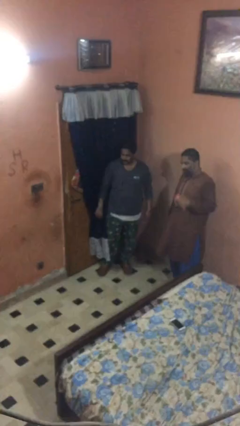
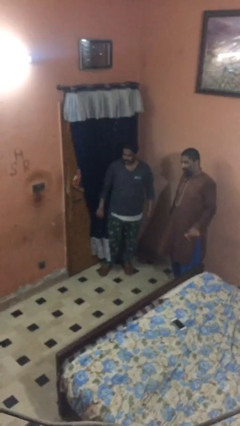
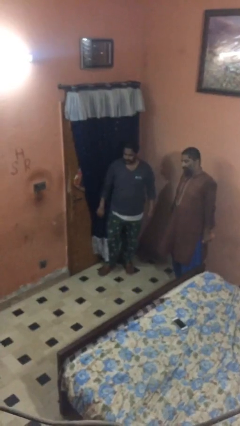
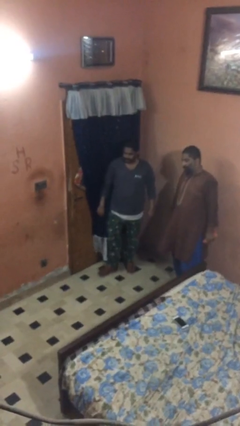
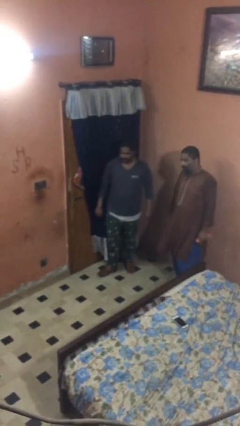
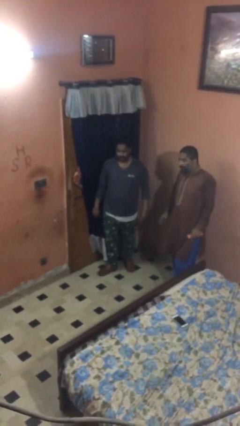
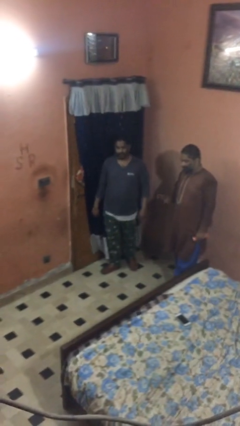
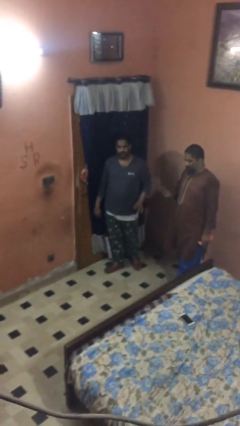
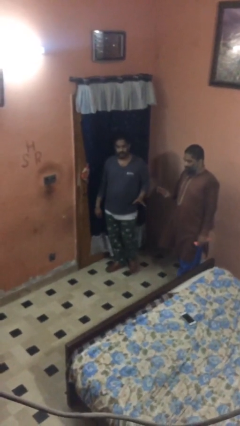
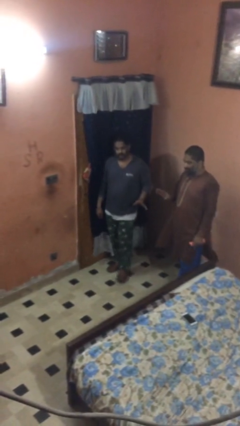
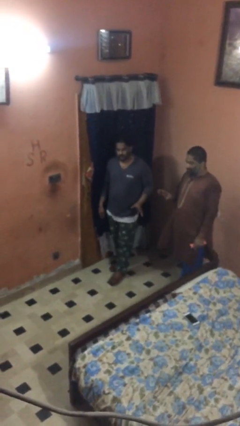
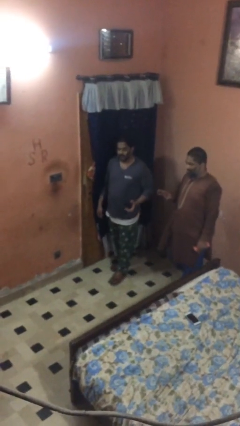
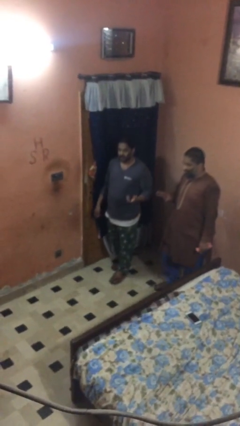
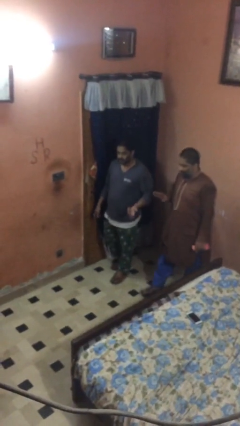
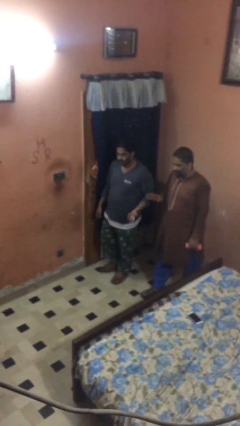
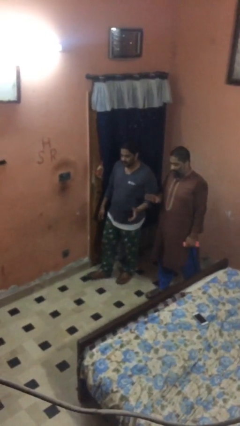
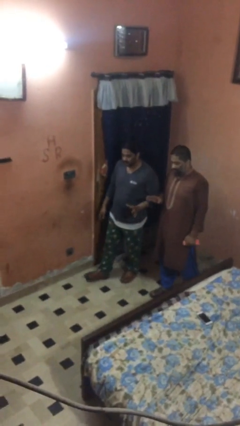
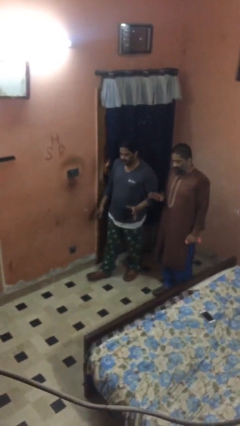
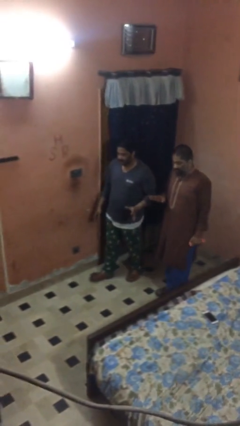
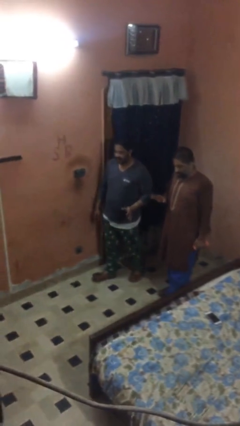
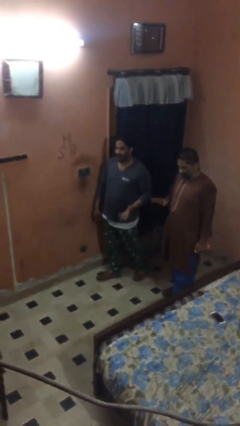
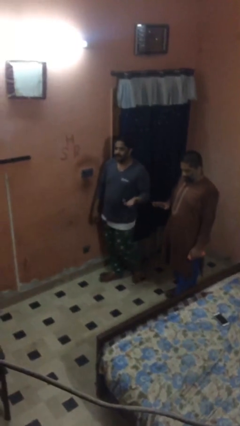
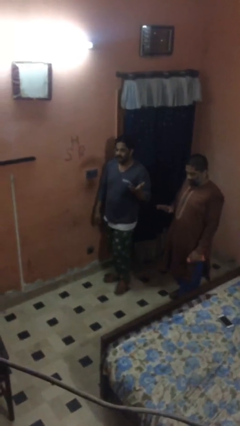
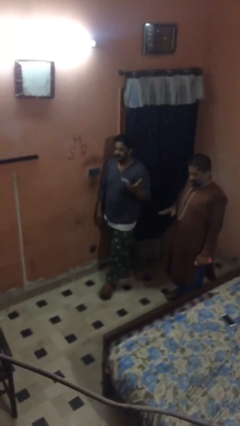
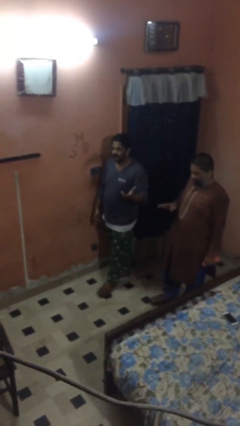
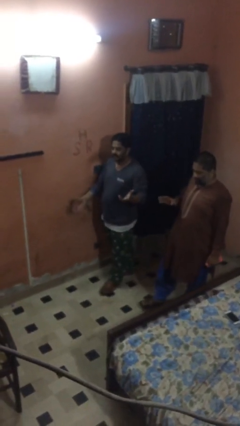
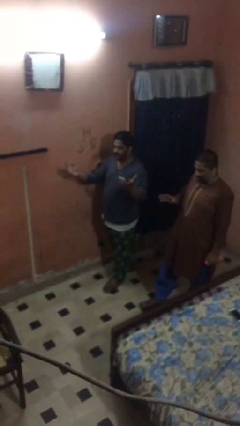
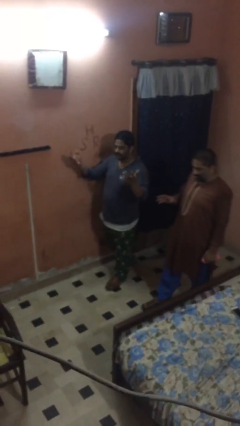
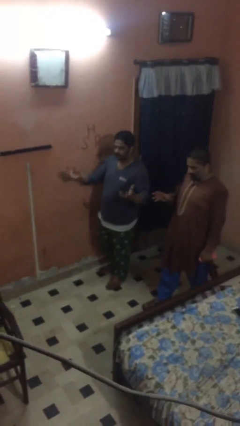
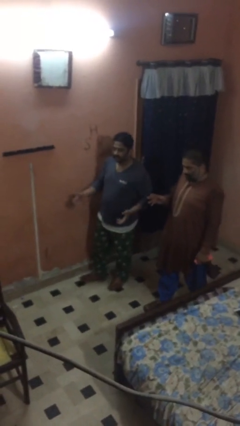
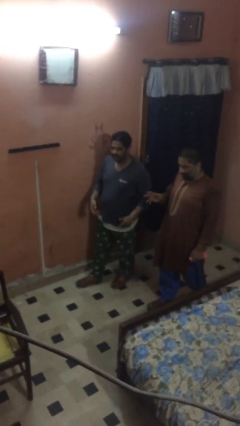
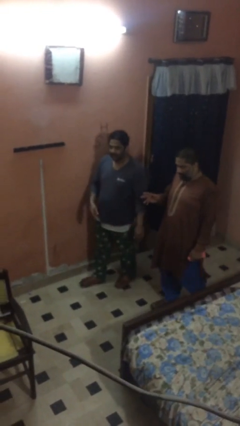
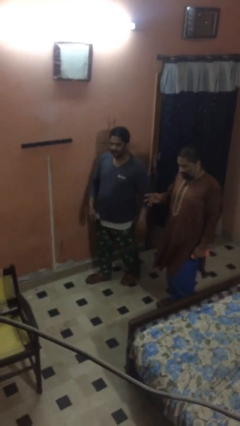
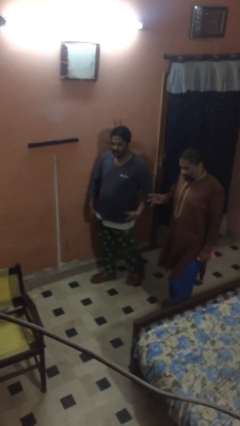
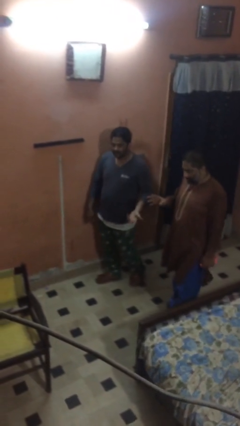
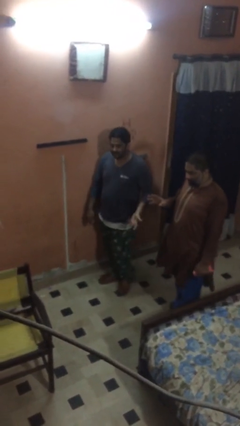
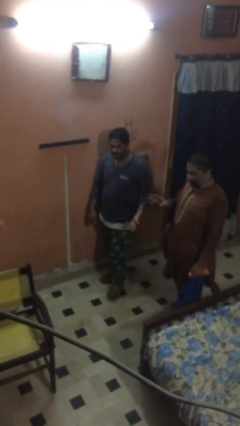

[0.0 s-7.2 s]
person talks to person

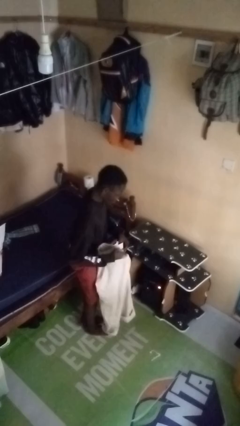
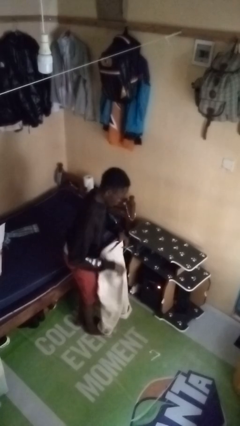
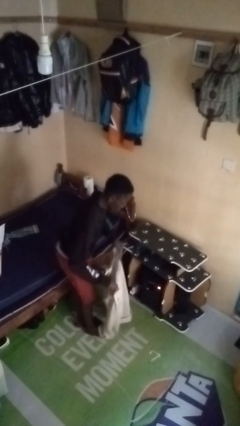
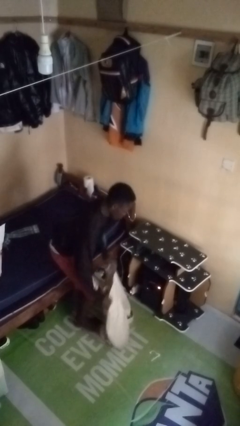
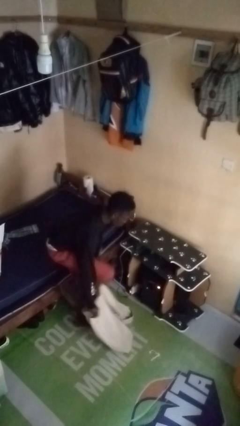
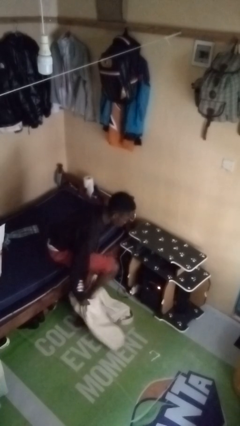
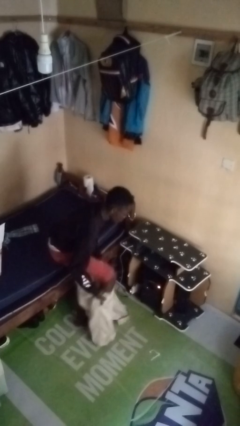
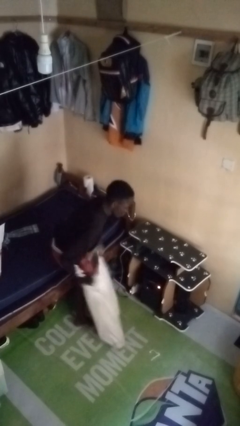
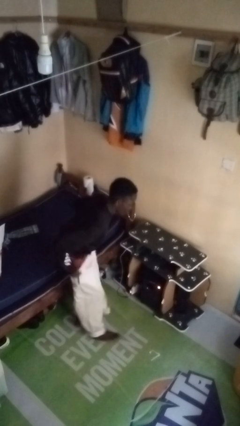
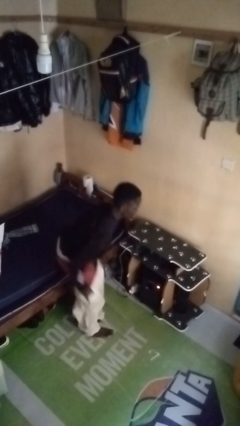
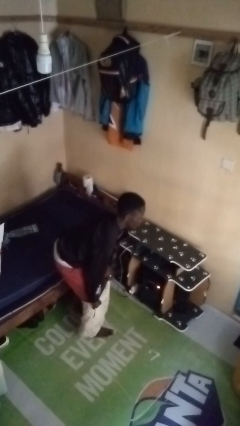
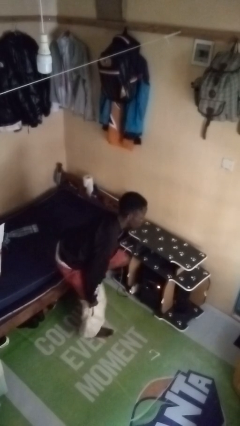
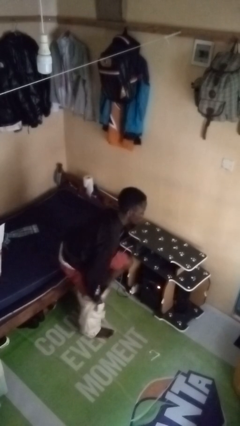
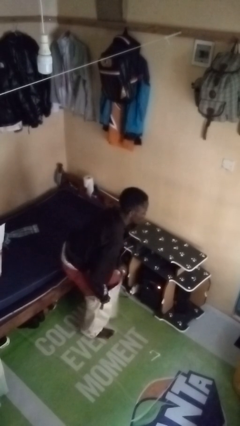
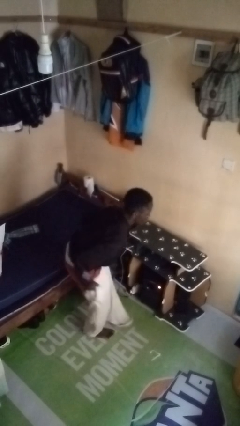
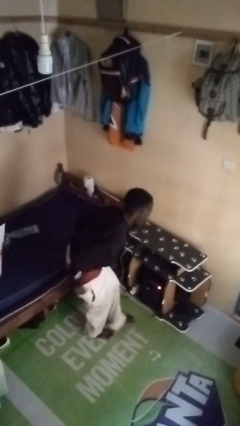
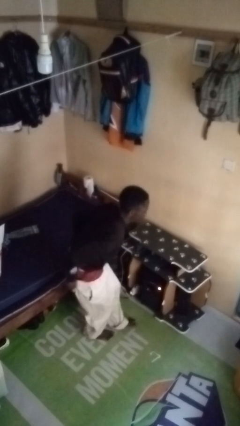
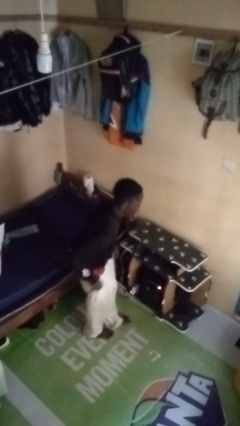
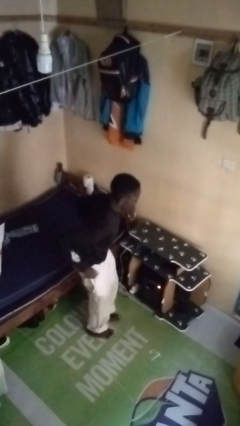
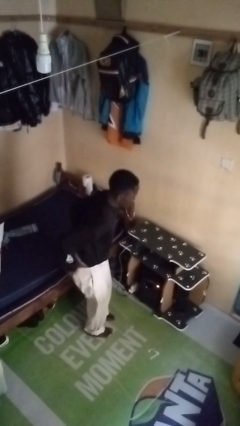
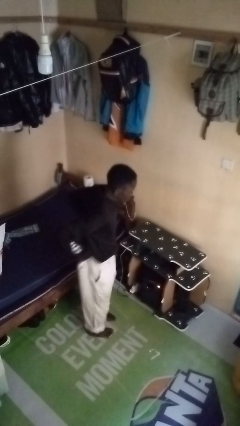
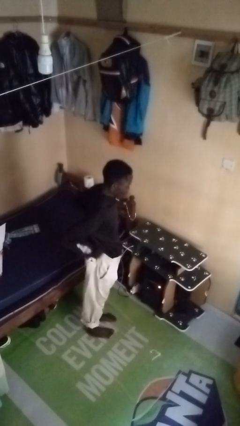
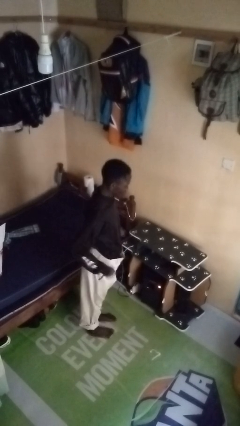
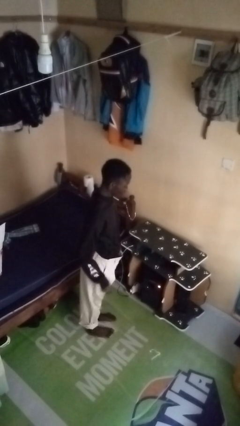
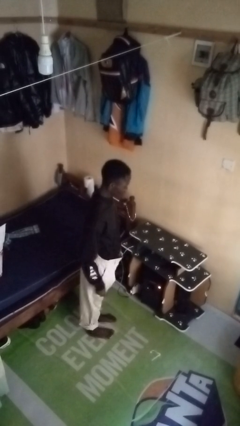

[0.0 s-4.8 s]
person puts on pants

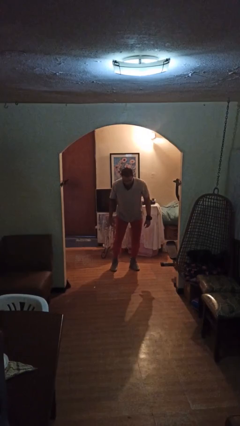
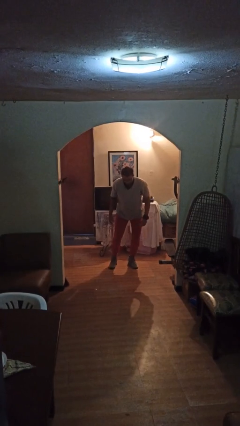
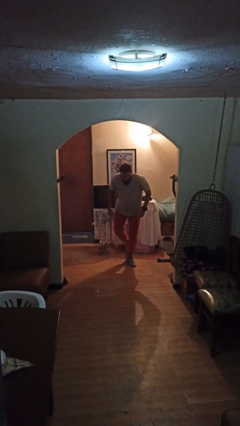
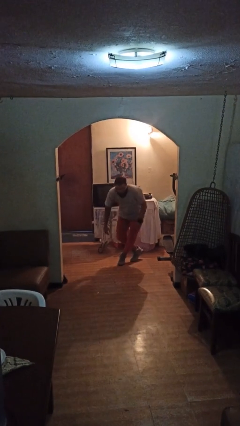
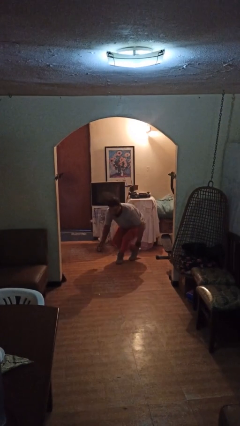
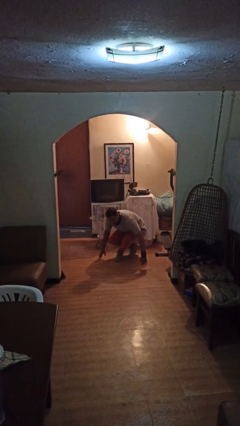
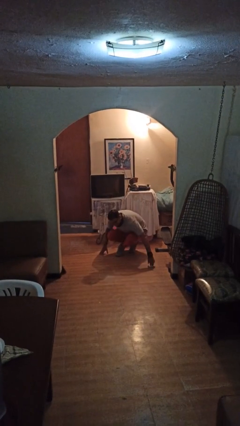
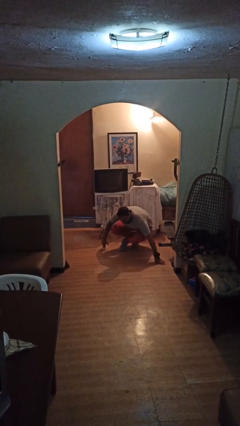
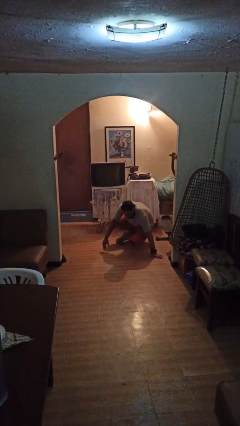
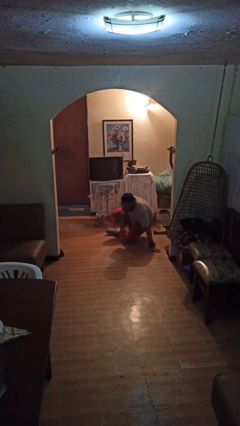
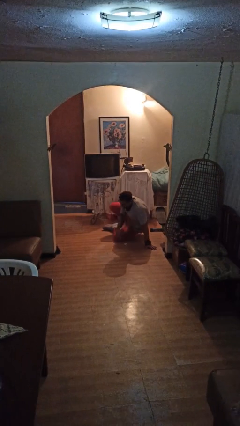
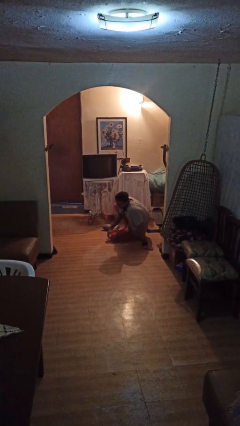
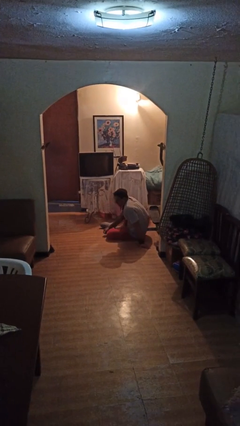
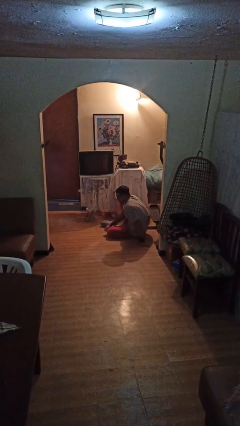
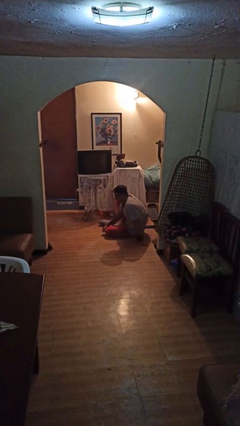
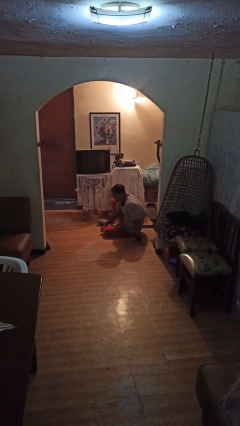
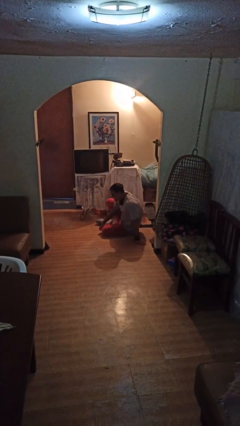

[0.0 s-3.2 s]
person sits down

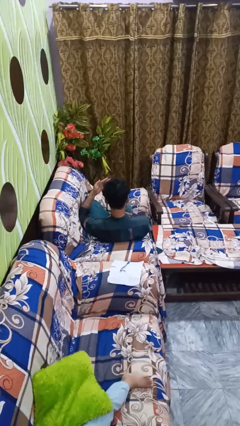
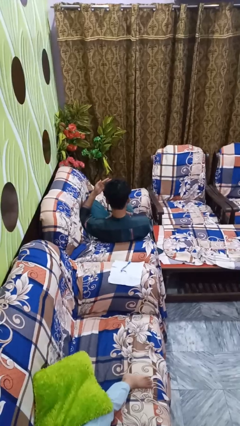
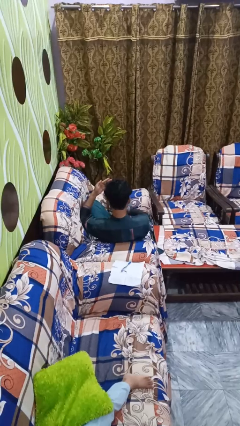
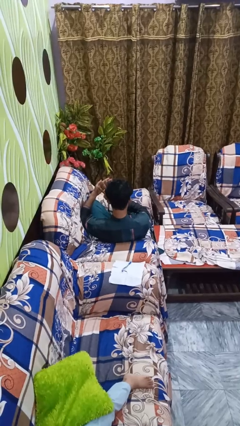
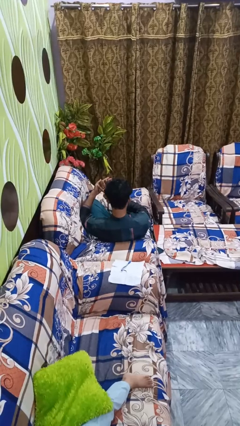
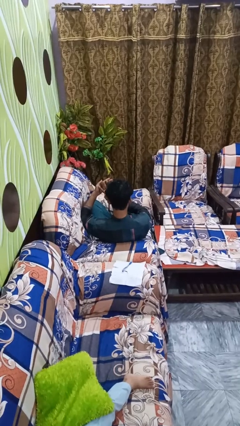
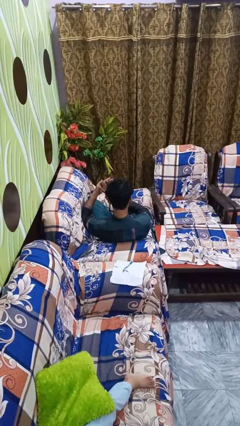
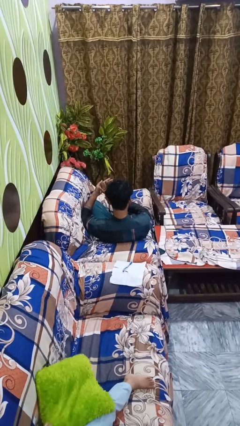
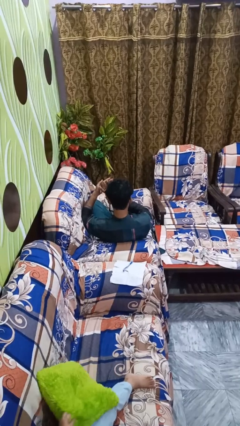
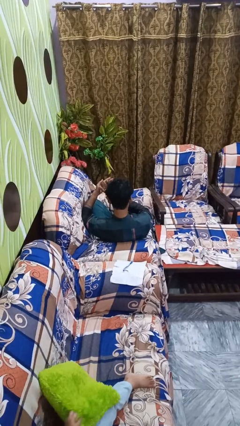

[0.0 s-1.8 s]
person gestures number three

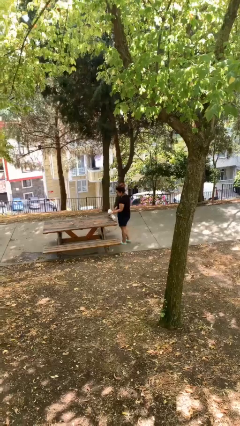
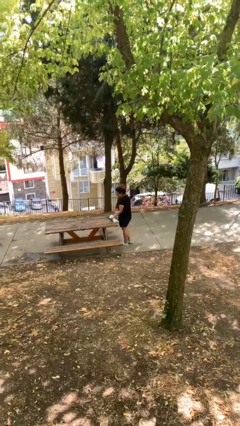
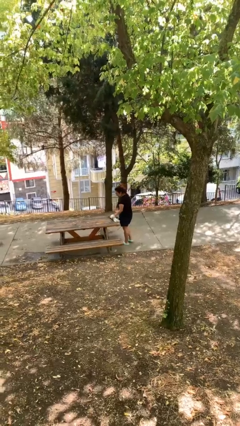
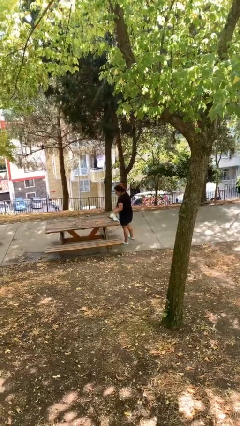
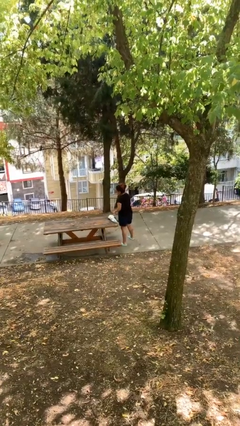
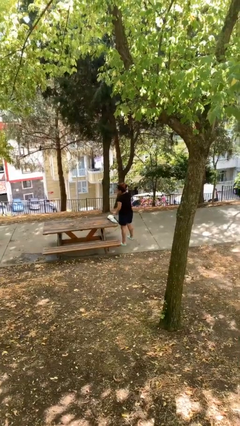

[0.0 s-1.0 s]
person puts down object on table
